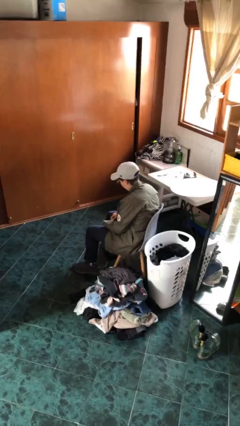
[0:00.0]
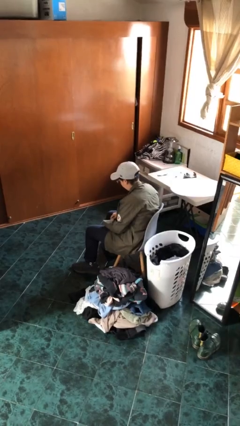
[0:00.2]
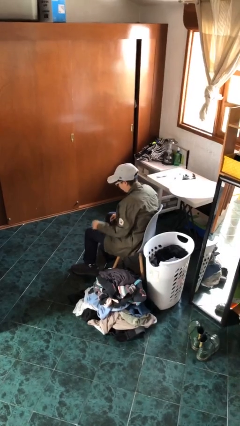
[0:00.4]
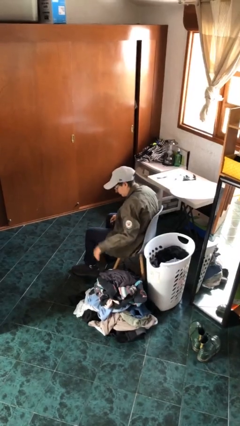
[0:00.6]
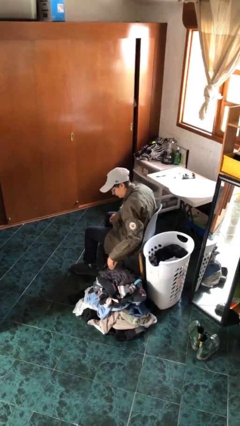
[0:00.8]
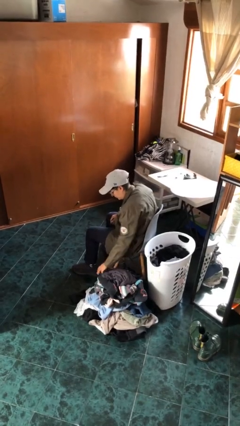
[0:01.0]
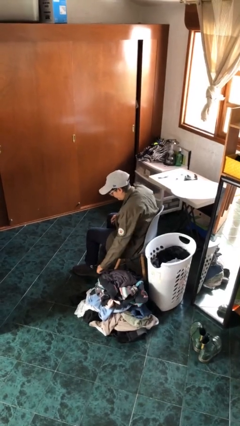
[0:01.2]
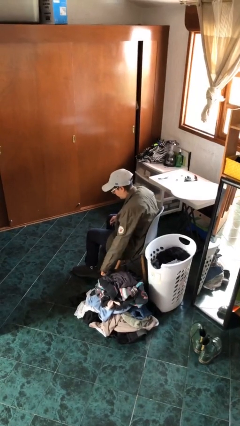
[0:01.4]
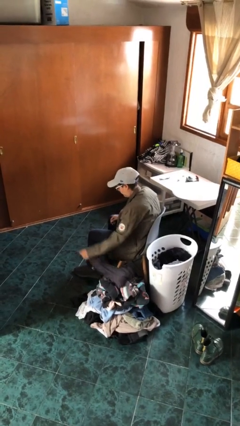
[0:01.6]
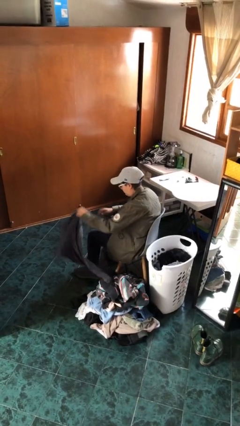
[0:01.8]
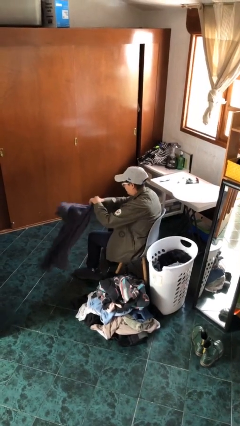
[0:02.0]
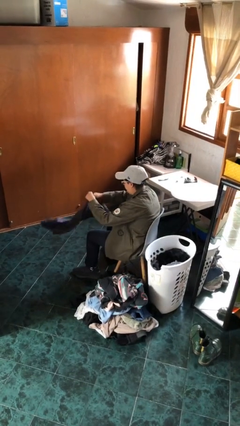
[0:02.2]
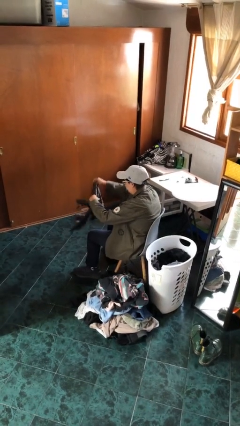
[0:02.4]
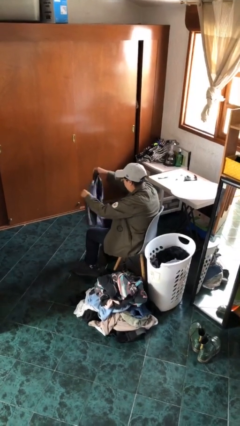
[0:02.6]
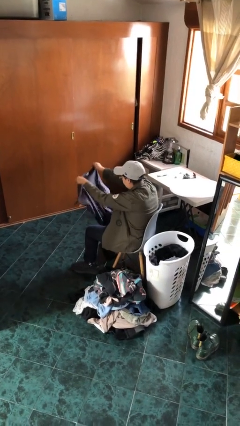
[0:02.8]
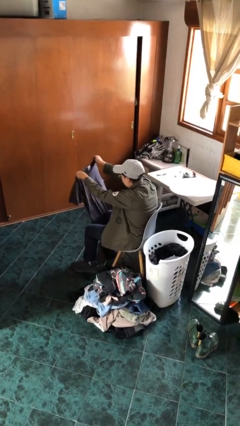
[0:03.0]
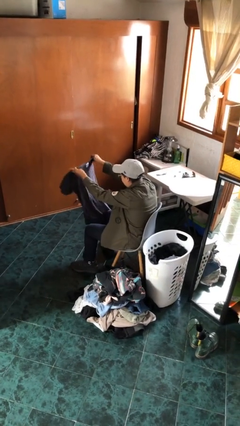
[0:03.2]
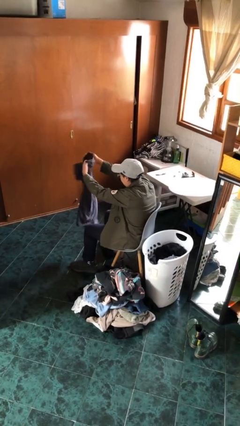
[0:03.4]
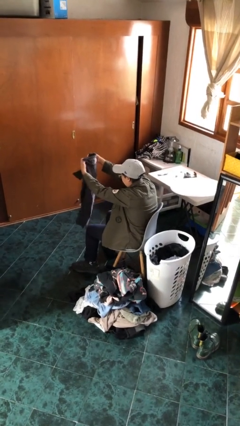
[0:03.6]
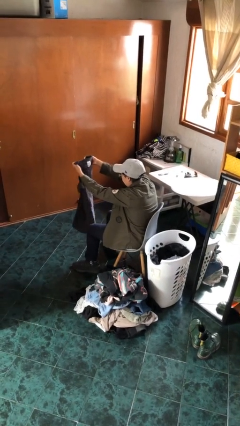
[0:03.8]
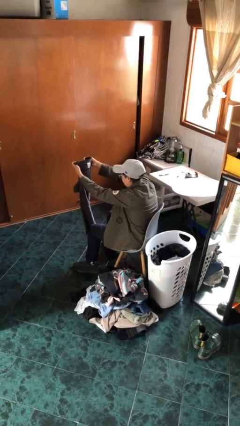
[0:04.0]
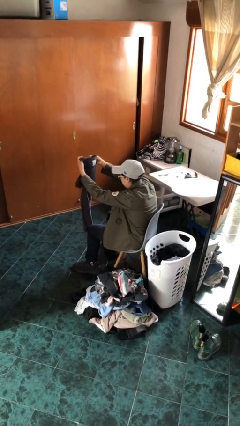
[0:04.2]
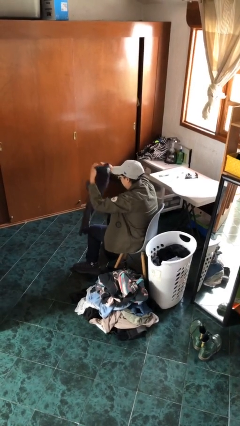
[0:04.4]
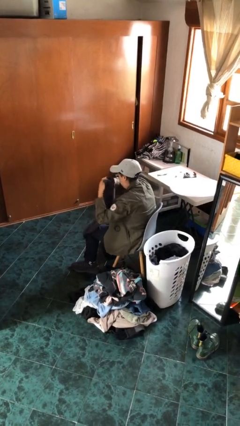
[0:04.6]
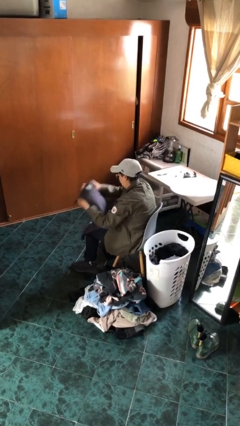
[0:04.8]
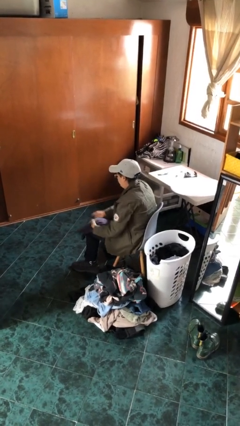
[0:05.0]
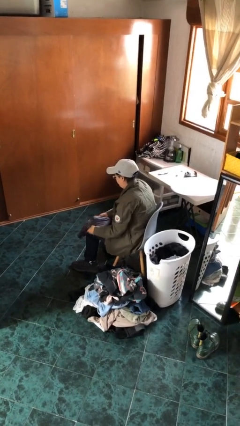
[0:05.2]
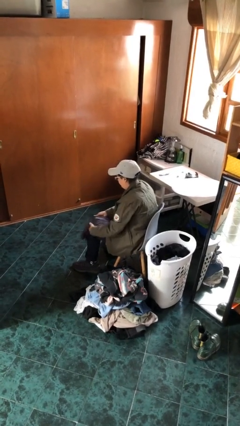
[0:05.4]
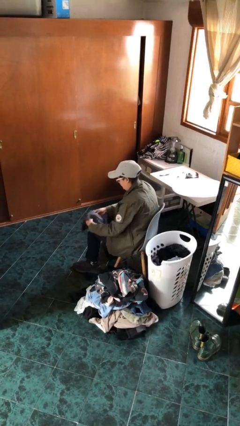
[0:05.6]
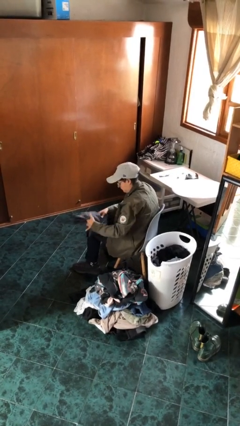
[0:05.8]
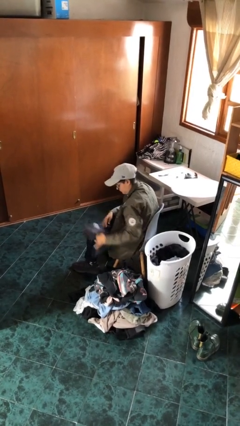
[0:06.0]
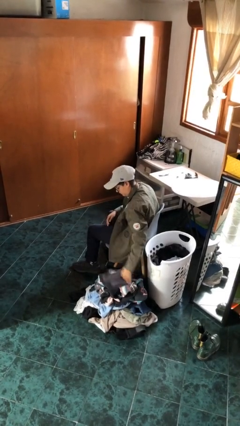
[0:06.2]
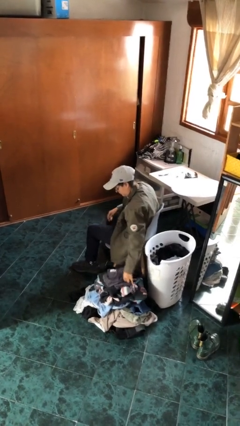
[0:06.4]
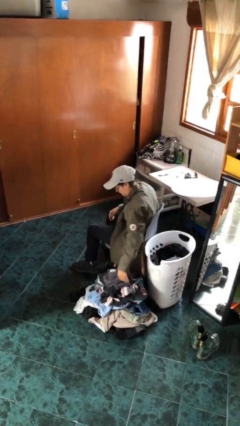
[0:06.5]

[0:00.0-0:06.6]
person folds shirt

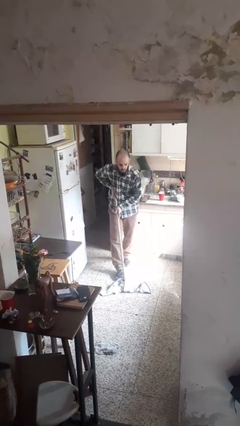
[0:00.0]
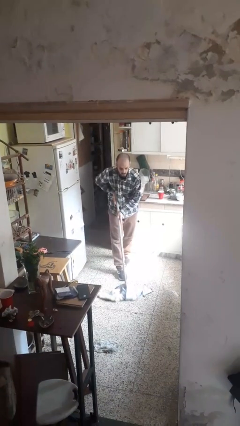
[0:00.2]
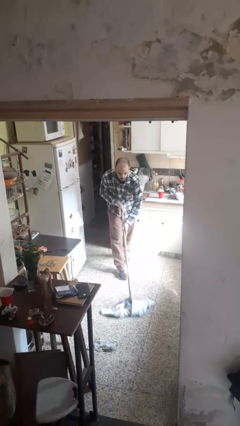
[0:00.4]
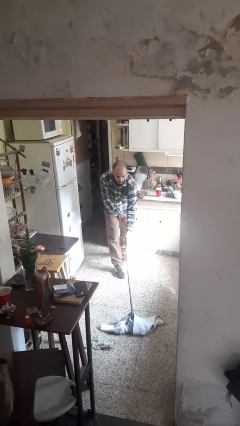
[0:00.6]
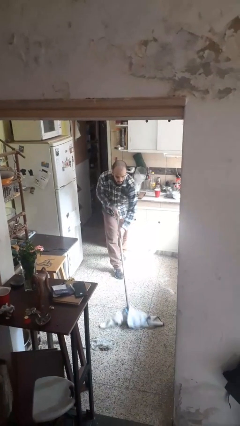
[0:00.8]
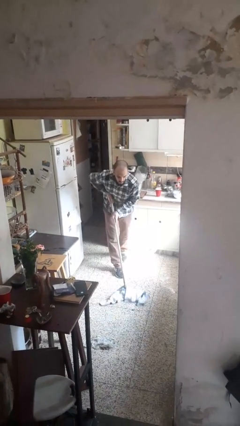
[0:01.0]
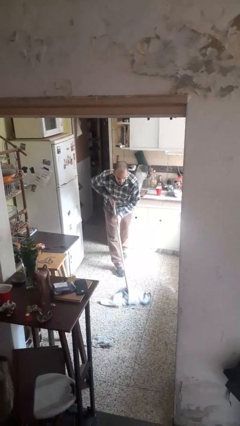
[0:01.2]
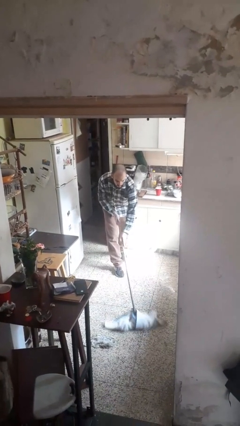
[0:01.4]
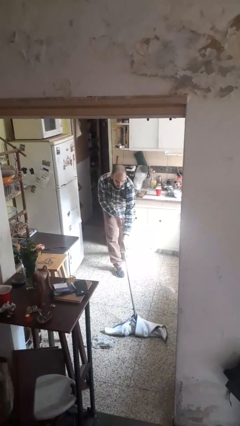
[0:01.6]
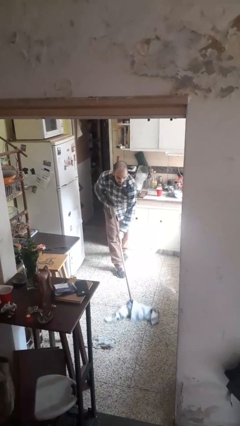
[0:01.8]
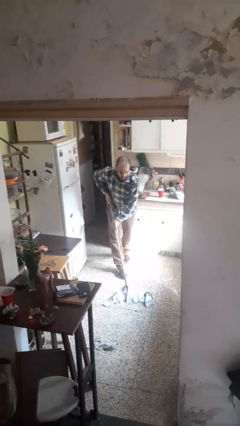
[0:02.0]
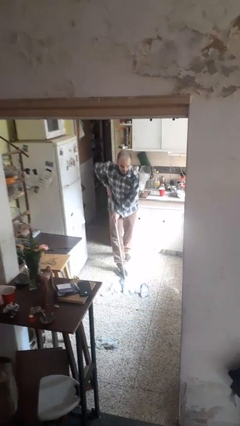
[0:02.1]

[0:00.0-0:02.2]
person mops

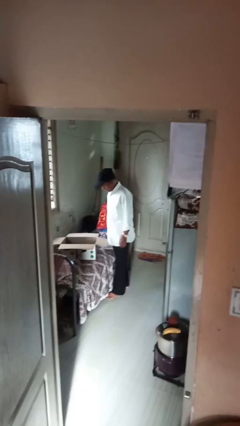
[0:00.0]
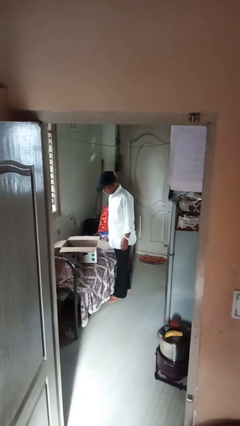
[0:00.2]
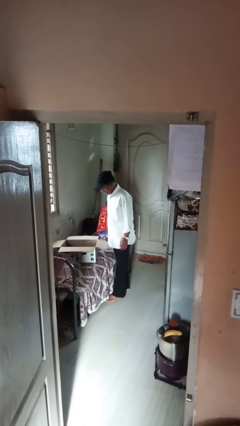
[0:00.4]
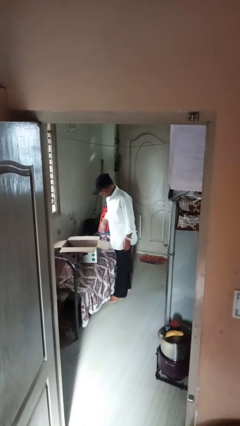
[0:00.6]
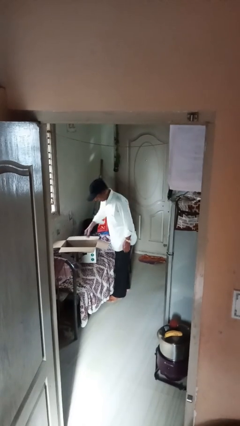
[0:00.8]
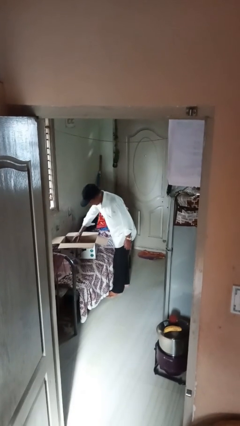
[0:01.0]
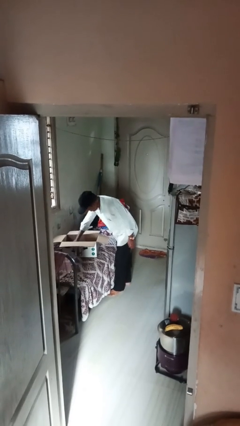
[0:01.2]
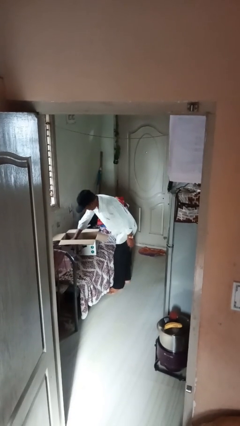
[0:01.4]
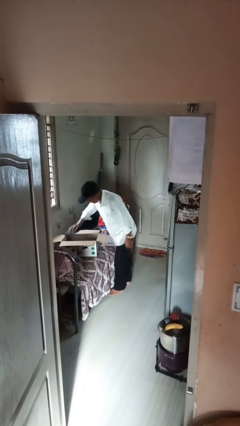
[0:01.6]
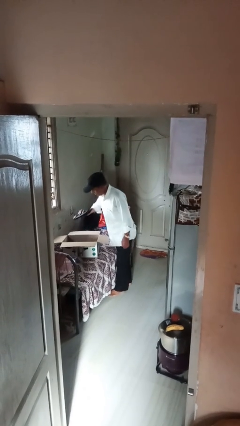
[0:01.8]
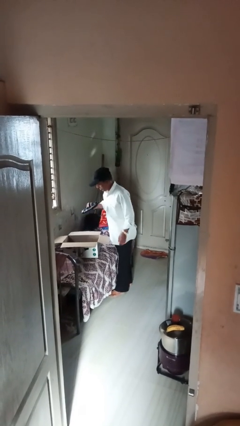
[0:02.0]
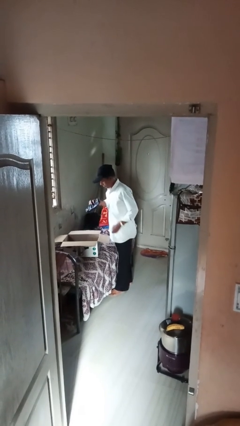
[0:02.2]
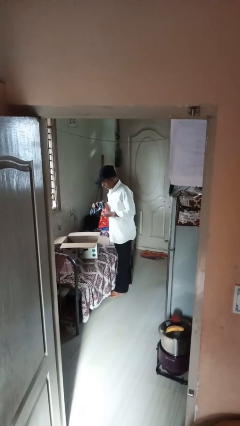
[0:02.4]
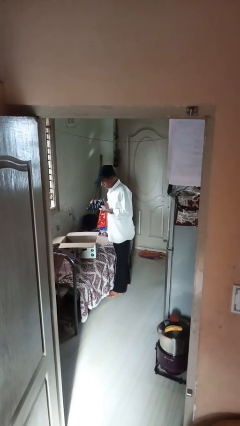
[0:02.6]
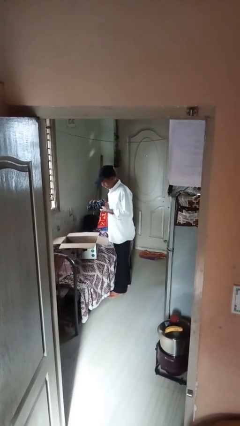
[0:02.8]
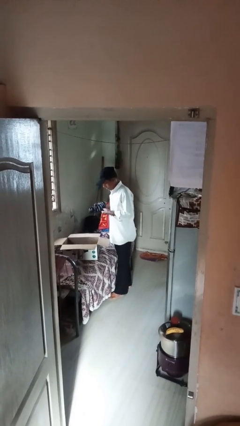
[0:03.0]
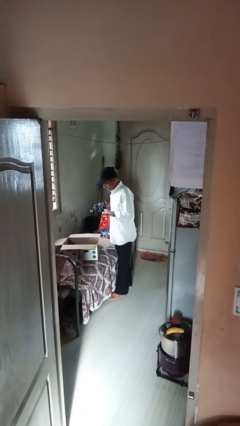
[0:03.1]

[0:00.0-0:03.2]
person takes object from box

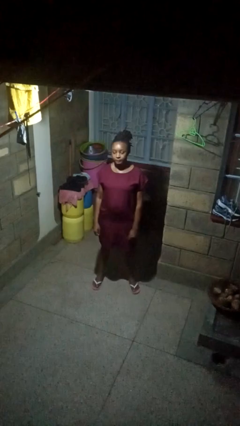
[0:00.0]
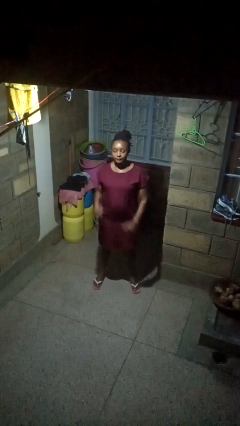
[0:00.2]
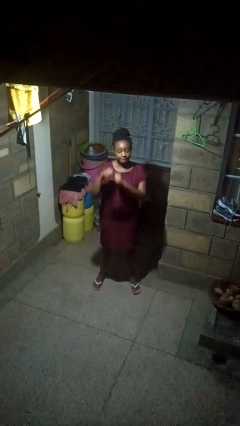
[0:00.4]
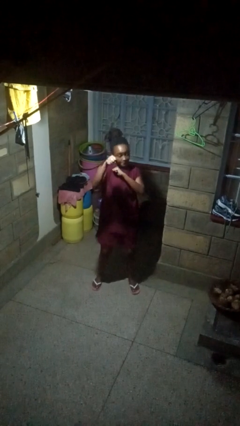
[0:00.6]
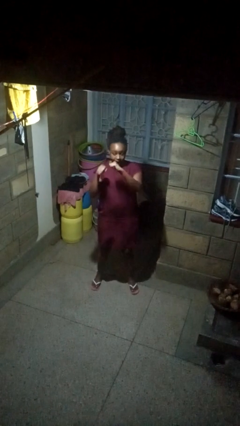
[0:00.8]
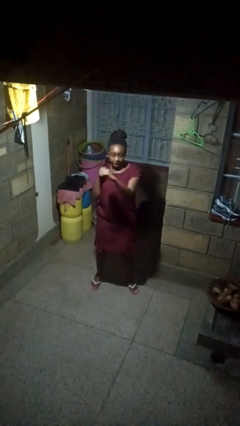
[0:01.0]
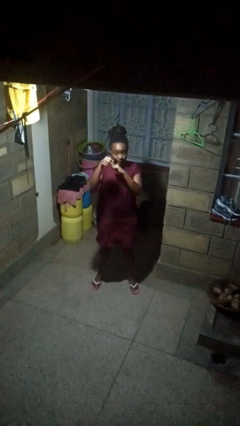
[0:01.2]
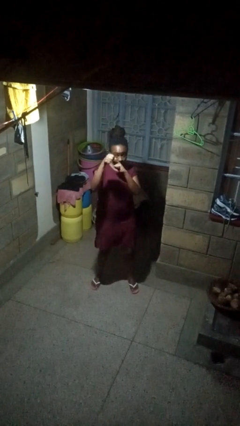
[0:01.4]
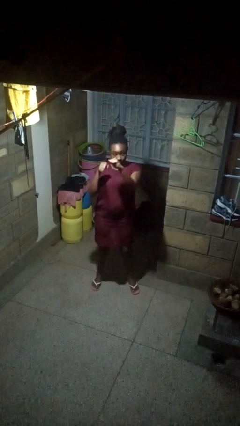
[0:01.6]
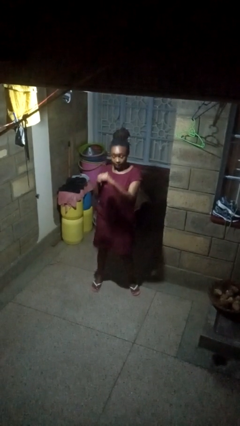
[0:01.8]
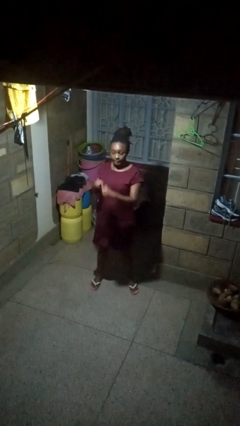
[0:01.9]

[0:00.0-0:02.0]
person punches

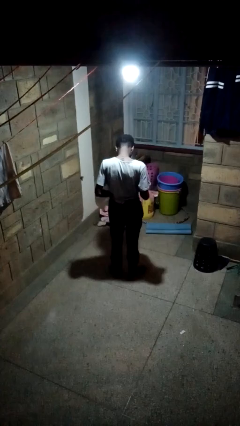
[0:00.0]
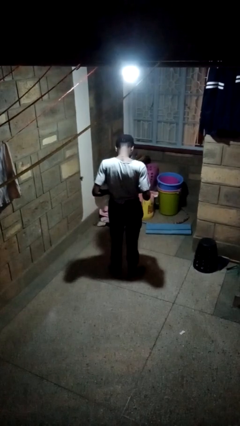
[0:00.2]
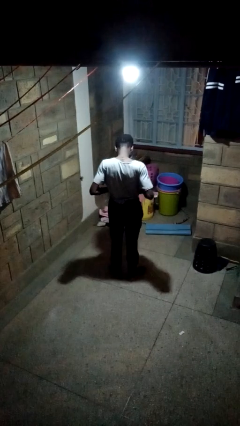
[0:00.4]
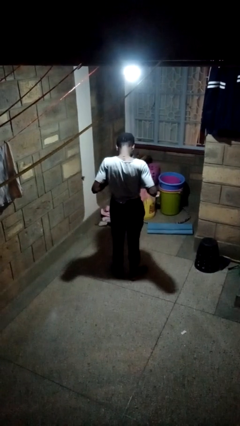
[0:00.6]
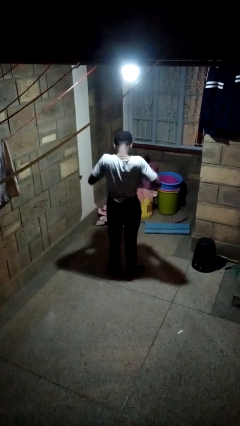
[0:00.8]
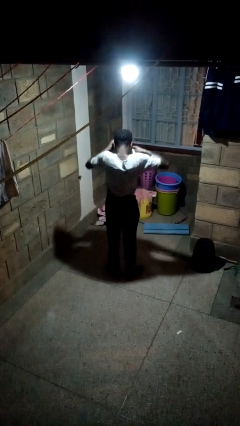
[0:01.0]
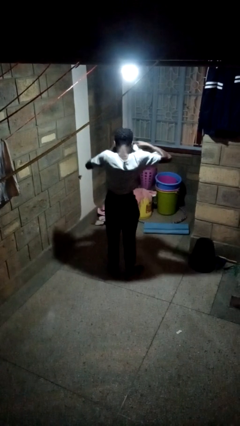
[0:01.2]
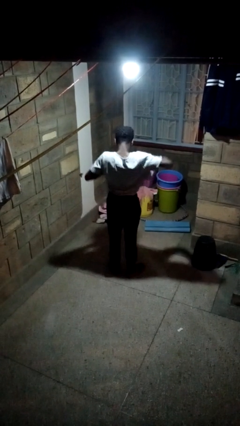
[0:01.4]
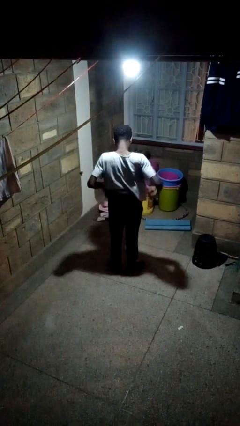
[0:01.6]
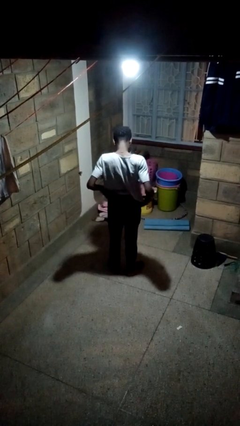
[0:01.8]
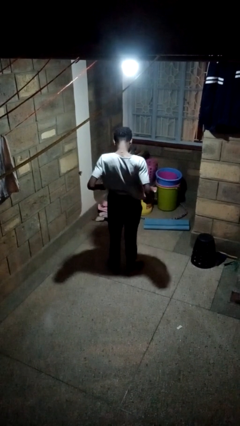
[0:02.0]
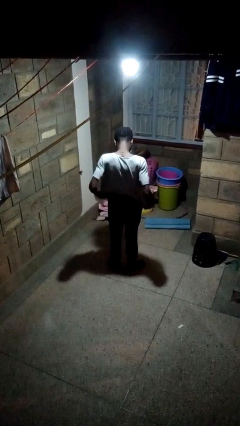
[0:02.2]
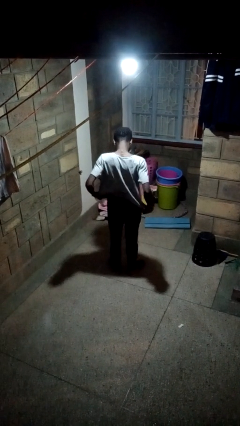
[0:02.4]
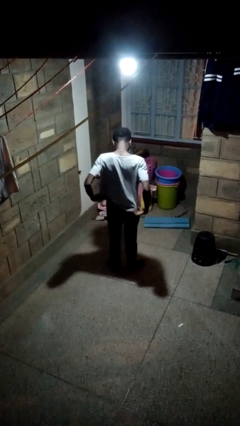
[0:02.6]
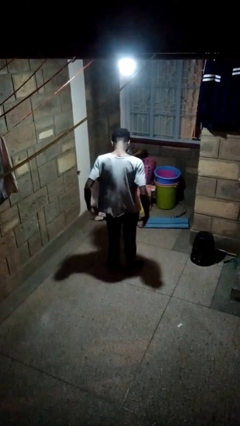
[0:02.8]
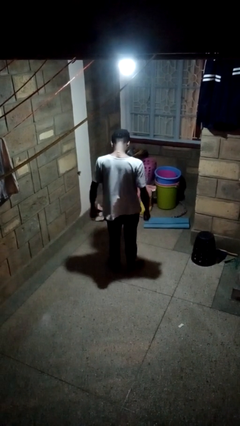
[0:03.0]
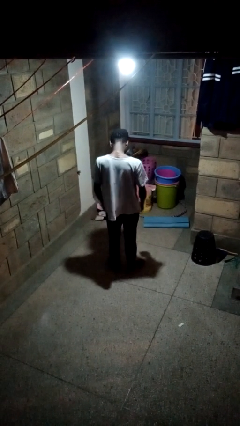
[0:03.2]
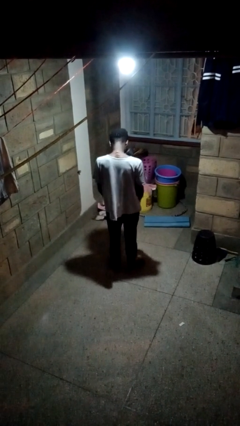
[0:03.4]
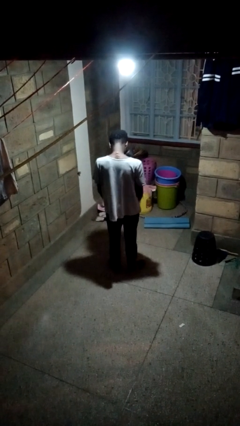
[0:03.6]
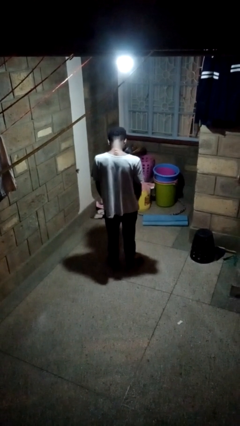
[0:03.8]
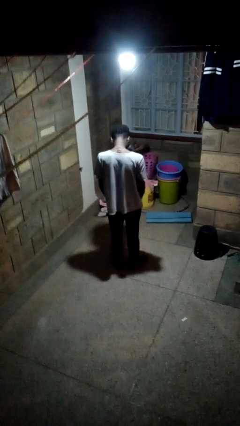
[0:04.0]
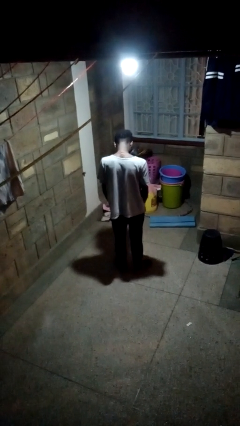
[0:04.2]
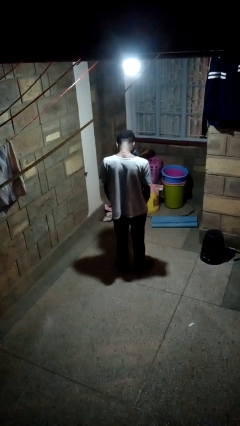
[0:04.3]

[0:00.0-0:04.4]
person untucks shirt
